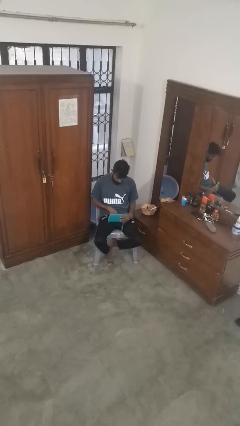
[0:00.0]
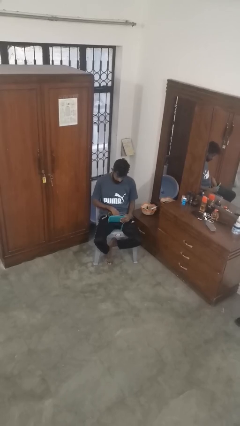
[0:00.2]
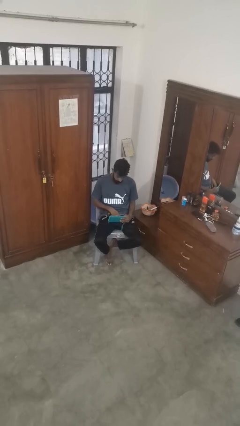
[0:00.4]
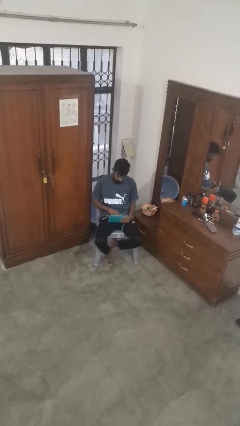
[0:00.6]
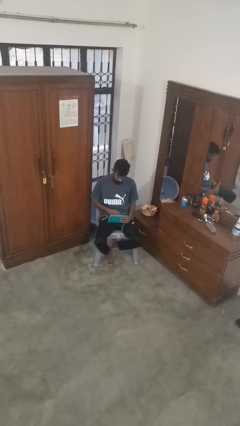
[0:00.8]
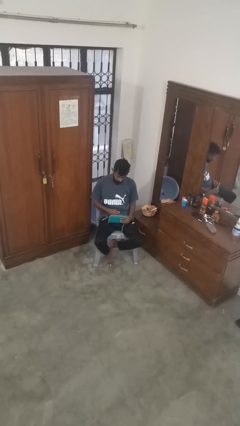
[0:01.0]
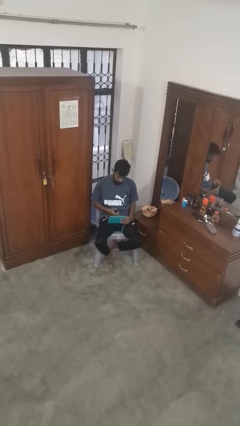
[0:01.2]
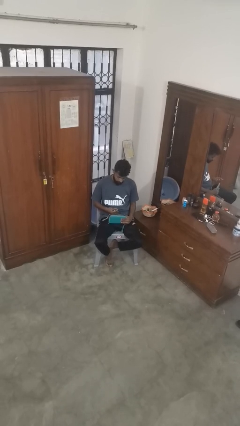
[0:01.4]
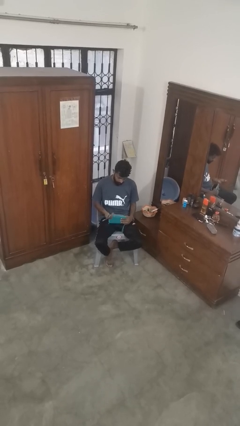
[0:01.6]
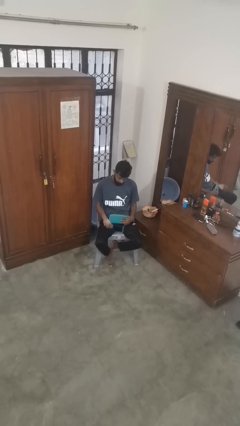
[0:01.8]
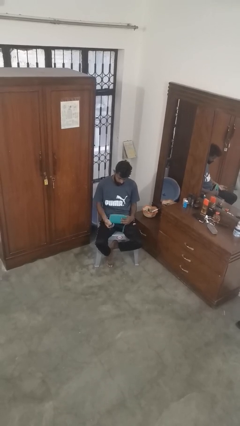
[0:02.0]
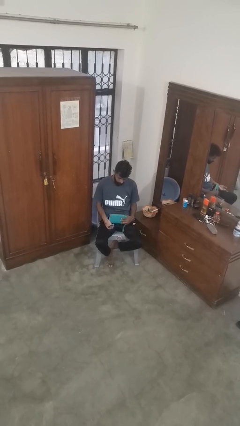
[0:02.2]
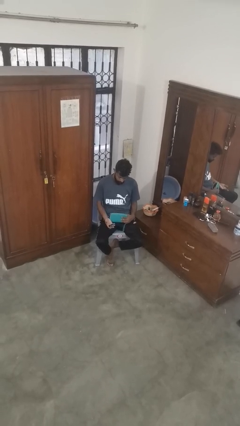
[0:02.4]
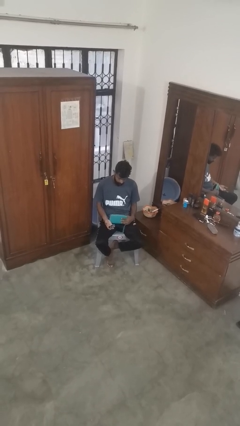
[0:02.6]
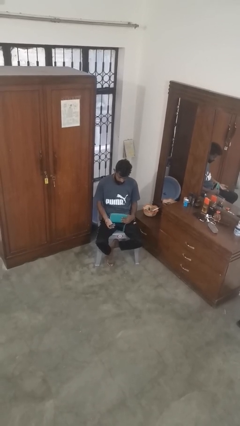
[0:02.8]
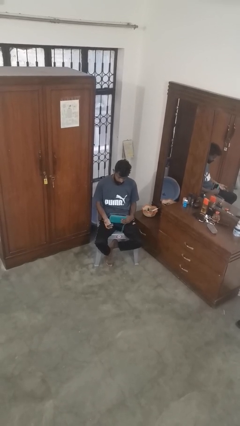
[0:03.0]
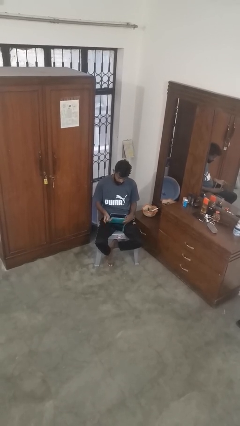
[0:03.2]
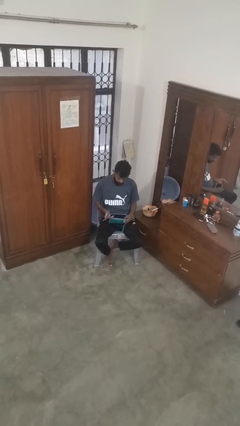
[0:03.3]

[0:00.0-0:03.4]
person takes object from purse

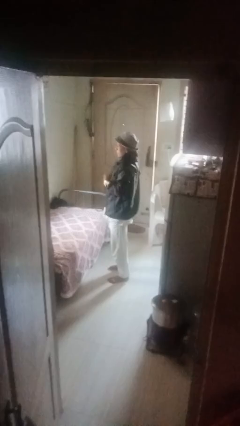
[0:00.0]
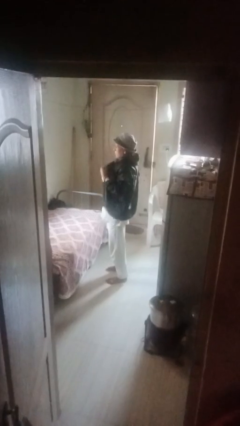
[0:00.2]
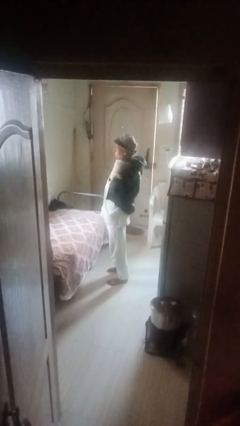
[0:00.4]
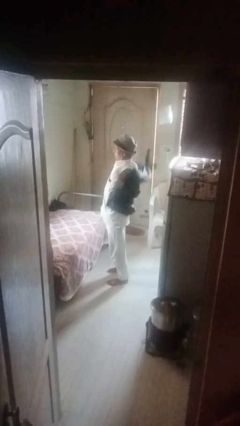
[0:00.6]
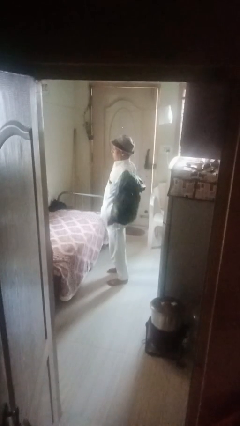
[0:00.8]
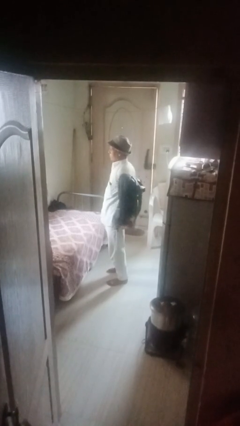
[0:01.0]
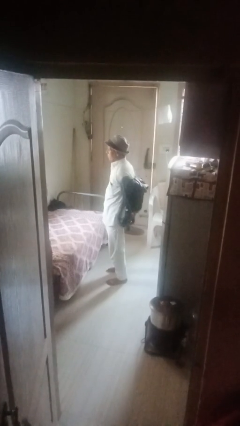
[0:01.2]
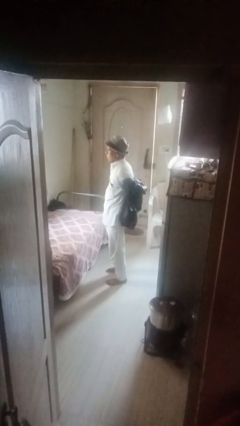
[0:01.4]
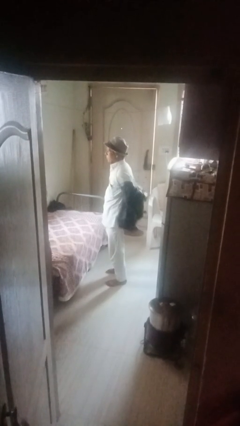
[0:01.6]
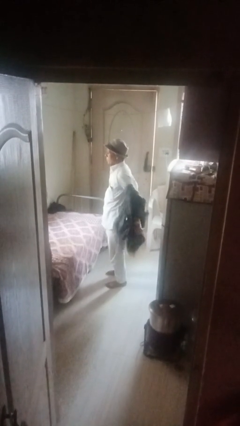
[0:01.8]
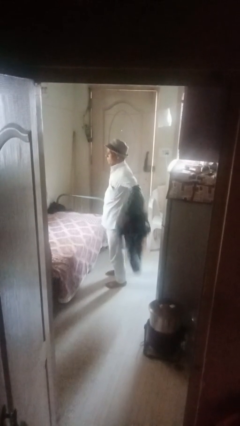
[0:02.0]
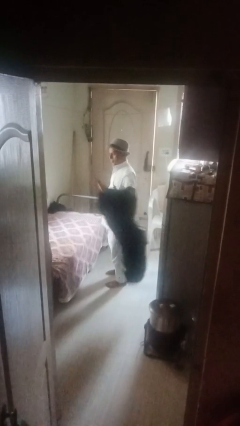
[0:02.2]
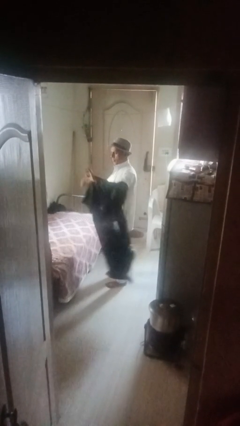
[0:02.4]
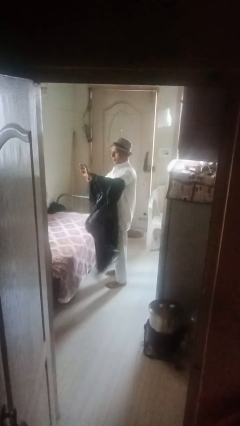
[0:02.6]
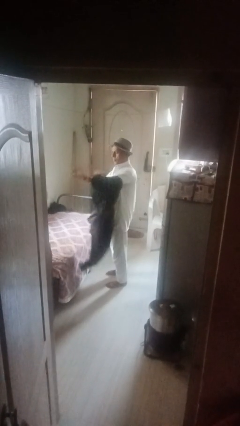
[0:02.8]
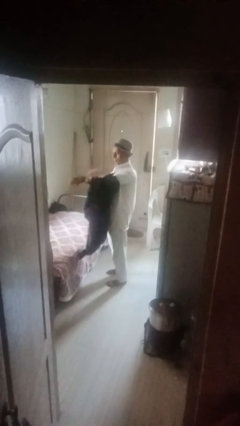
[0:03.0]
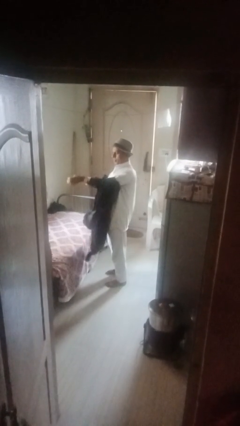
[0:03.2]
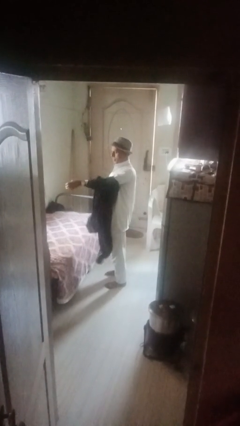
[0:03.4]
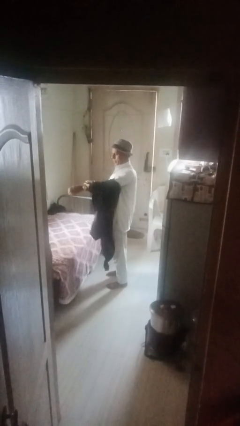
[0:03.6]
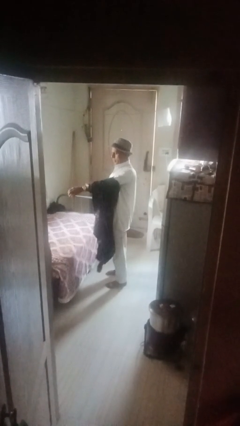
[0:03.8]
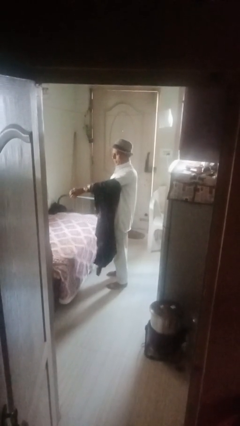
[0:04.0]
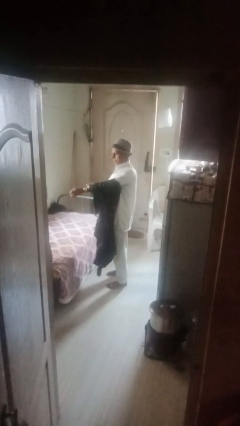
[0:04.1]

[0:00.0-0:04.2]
person takes off jacket

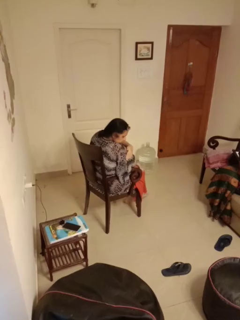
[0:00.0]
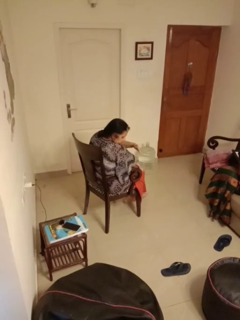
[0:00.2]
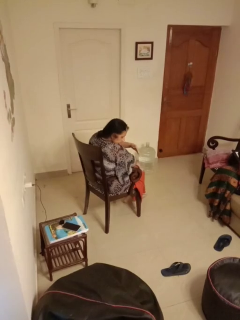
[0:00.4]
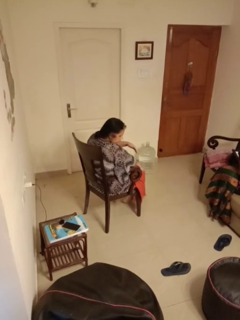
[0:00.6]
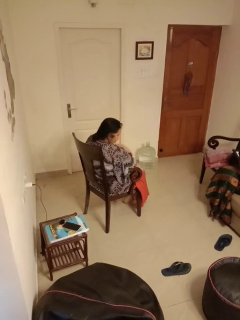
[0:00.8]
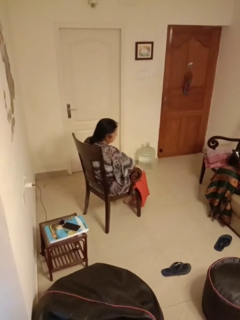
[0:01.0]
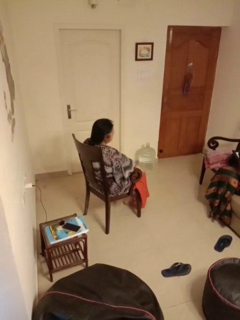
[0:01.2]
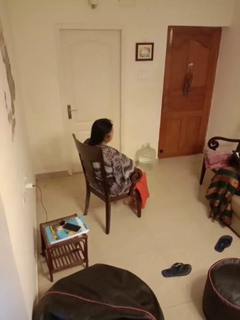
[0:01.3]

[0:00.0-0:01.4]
person swats bug

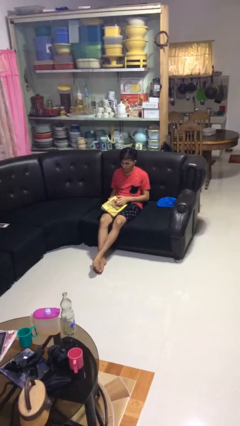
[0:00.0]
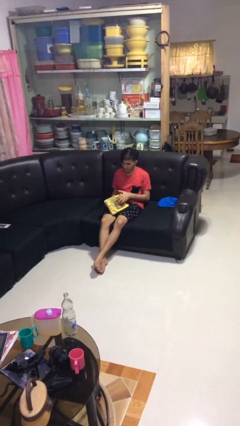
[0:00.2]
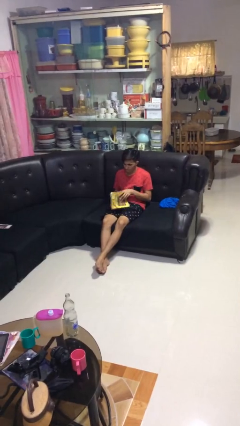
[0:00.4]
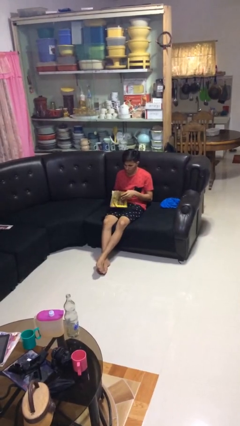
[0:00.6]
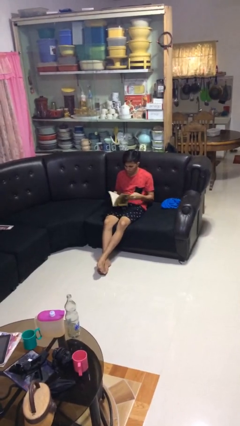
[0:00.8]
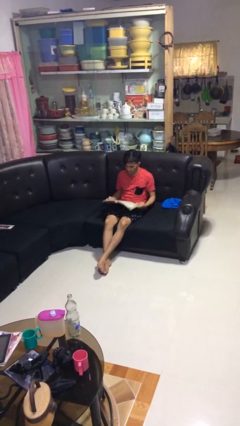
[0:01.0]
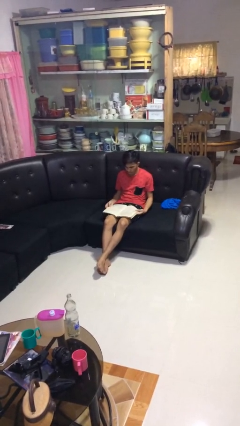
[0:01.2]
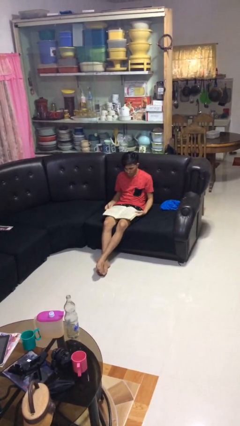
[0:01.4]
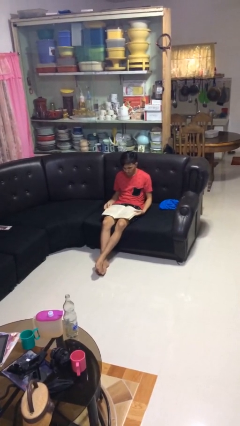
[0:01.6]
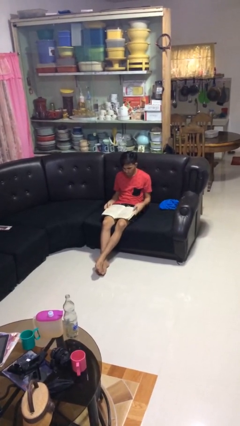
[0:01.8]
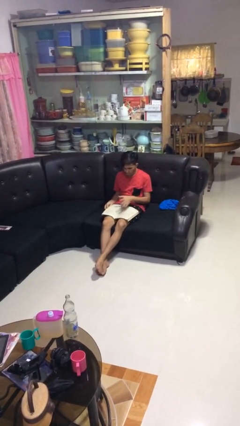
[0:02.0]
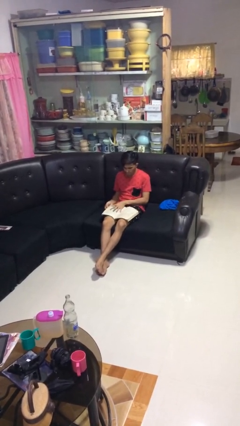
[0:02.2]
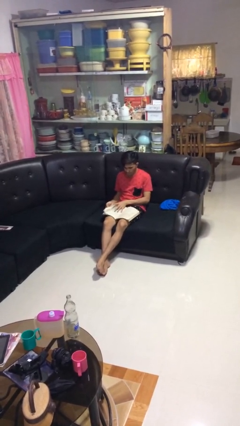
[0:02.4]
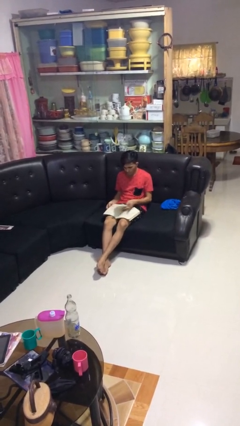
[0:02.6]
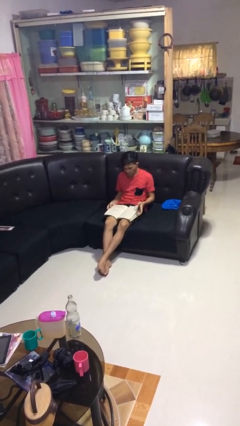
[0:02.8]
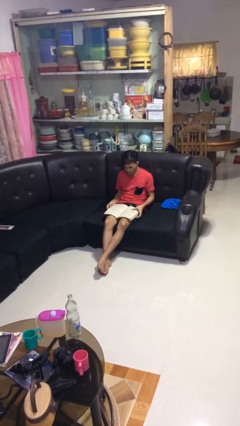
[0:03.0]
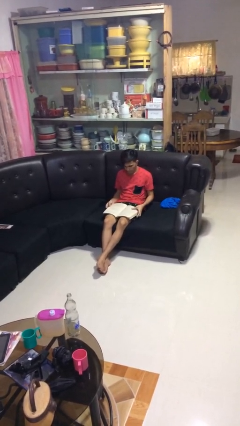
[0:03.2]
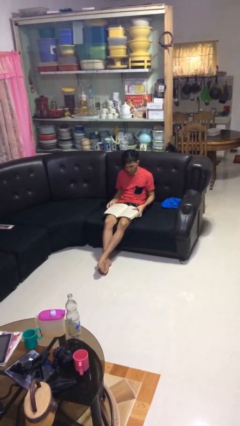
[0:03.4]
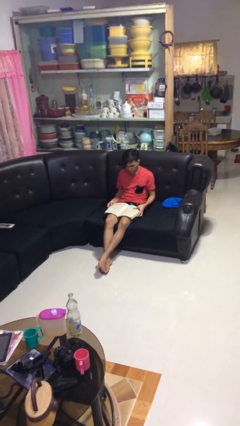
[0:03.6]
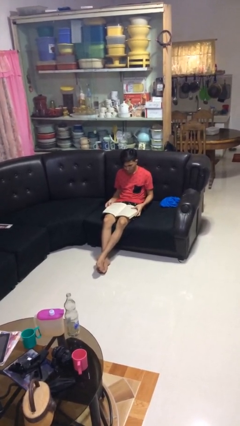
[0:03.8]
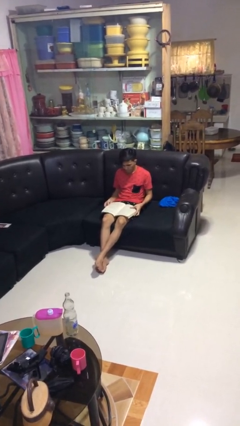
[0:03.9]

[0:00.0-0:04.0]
person reads book

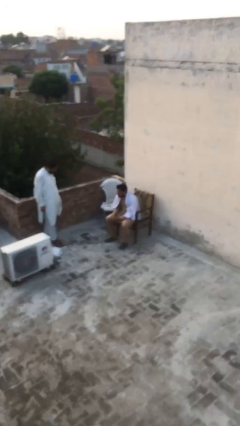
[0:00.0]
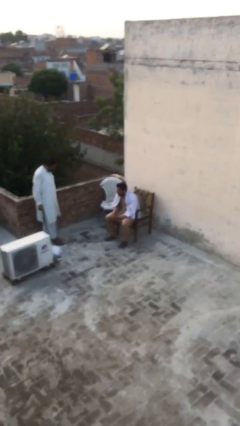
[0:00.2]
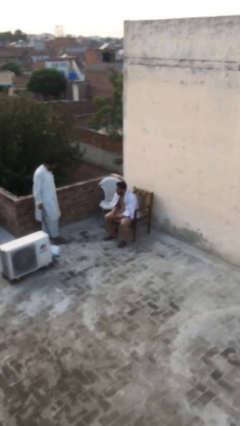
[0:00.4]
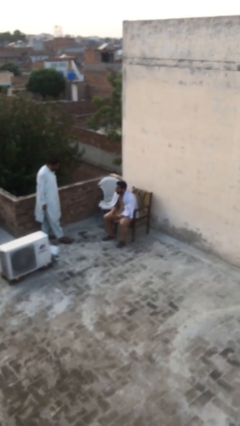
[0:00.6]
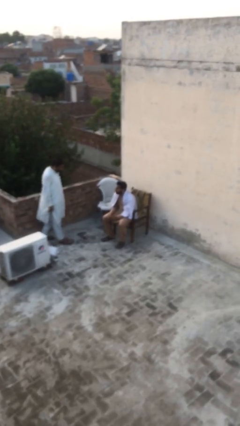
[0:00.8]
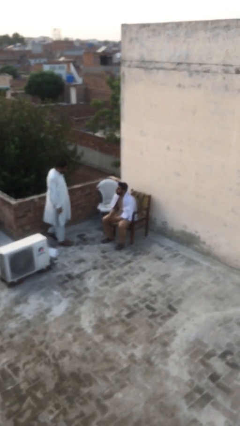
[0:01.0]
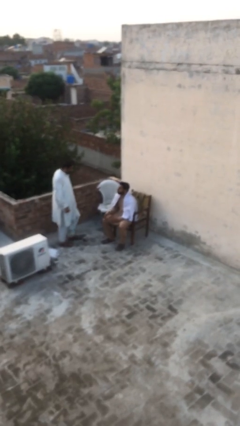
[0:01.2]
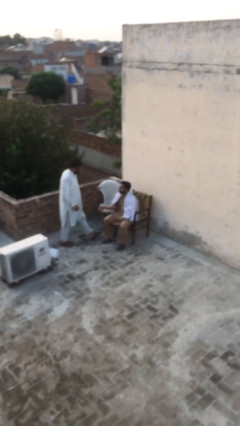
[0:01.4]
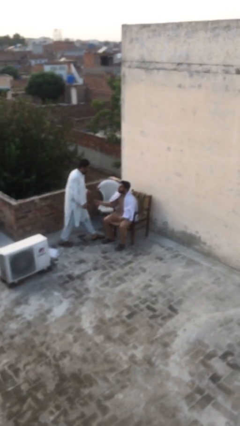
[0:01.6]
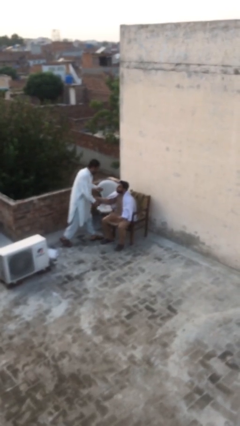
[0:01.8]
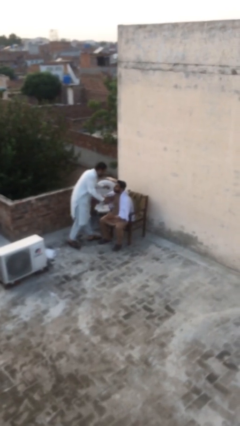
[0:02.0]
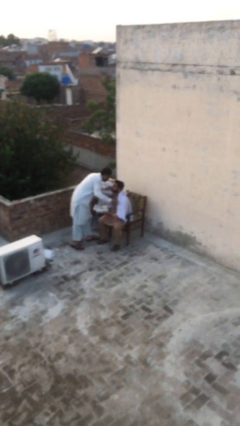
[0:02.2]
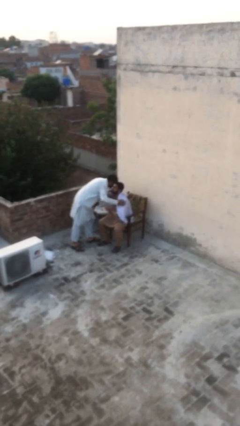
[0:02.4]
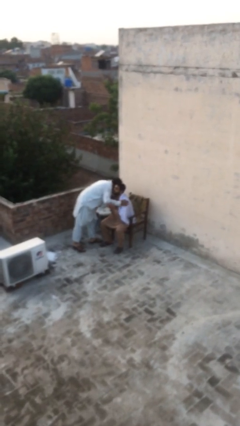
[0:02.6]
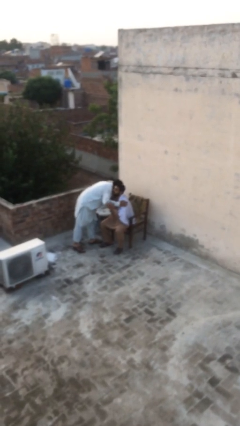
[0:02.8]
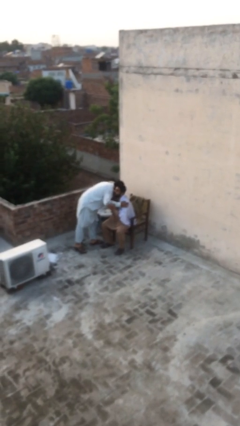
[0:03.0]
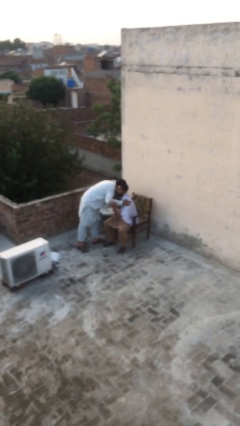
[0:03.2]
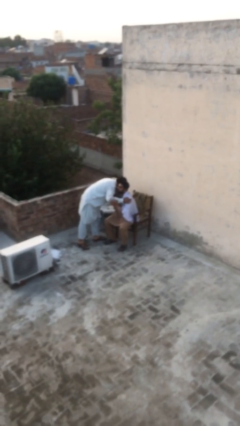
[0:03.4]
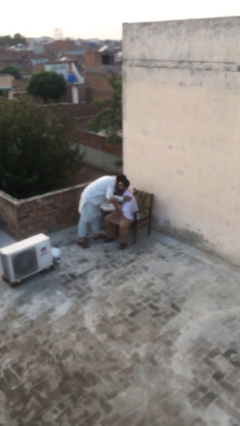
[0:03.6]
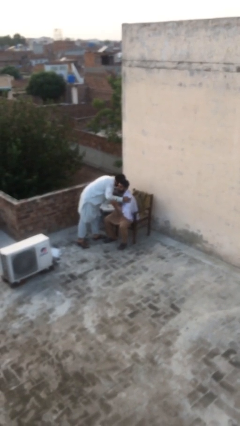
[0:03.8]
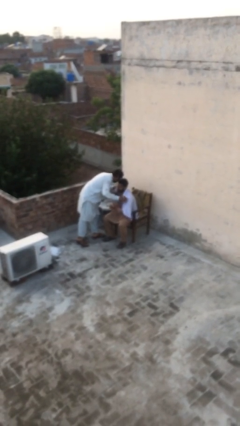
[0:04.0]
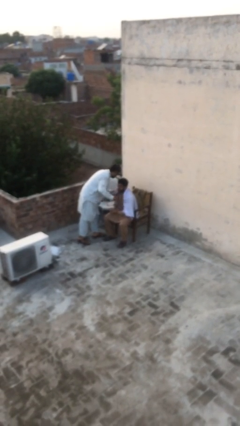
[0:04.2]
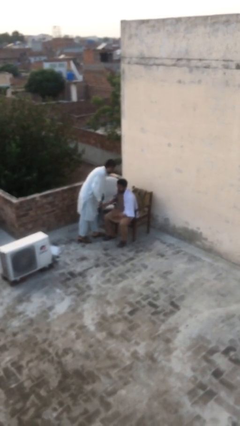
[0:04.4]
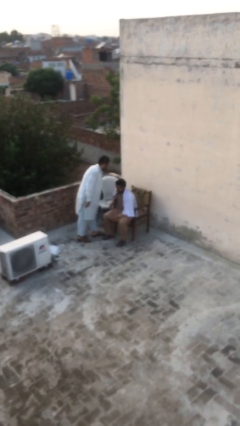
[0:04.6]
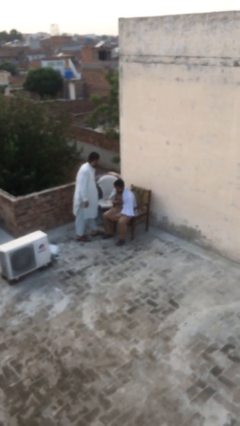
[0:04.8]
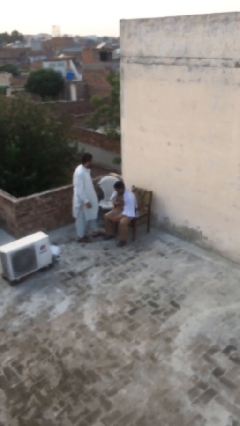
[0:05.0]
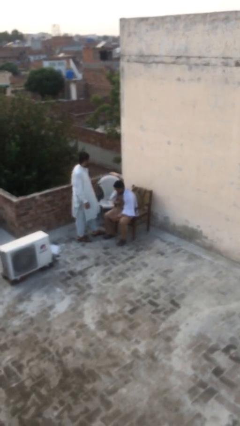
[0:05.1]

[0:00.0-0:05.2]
person embraces person
